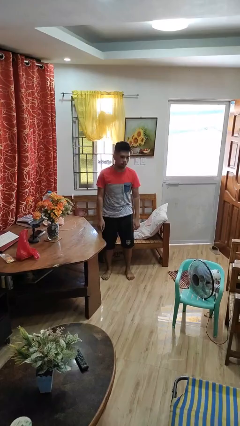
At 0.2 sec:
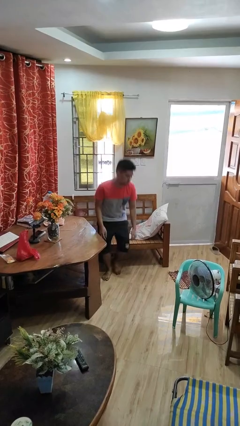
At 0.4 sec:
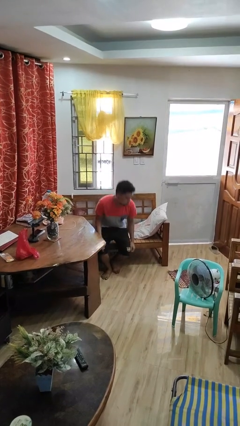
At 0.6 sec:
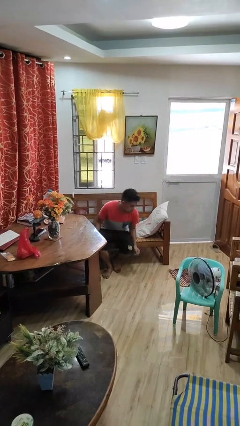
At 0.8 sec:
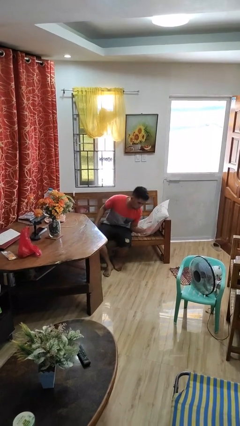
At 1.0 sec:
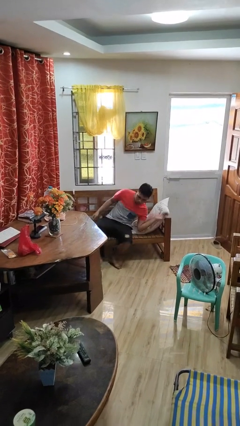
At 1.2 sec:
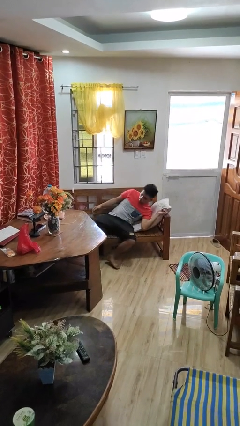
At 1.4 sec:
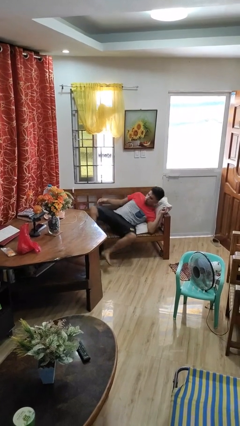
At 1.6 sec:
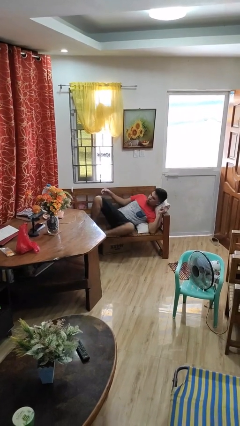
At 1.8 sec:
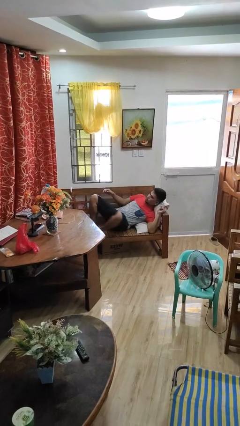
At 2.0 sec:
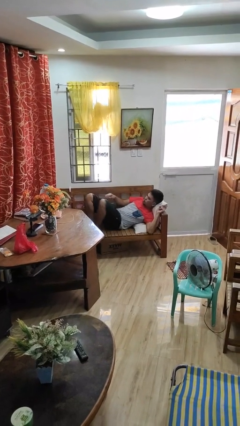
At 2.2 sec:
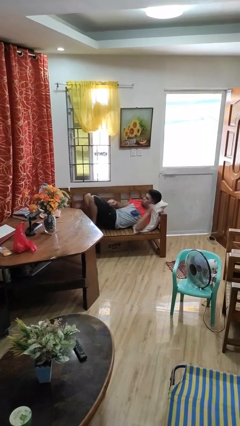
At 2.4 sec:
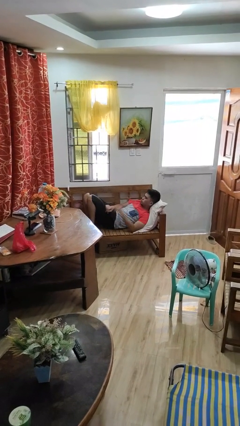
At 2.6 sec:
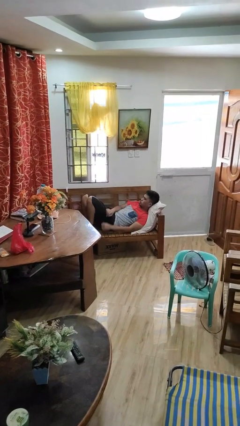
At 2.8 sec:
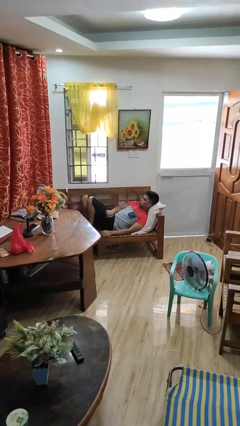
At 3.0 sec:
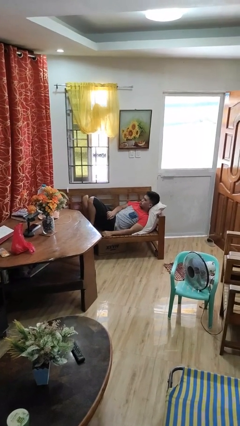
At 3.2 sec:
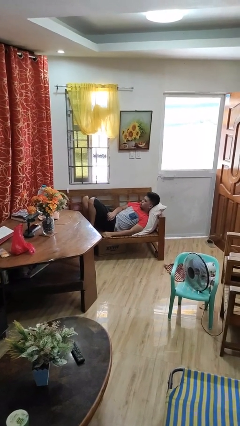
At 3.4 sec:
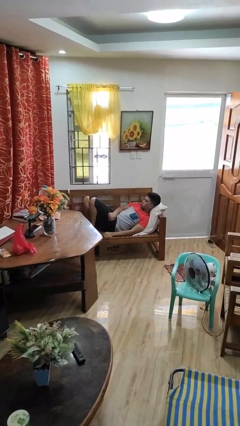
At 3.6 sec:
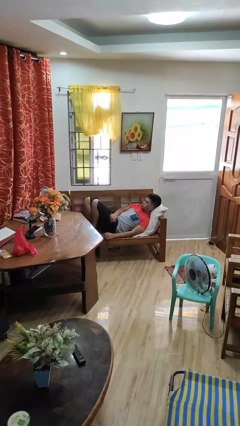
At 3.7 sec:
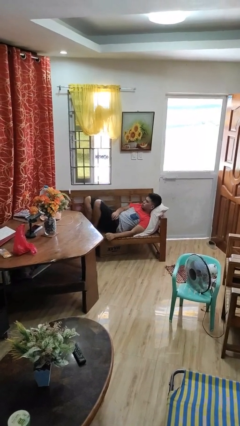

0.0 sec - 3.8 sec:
person lies down on couch

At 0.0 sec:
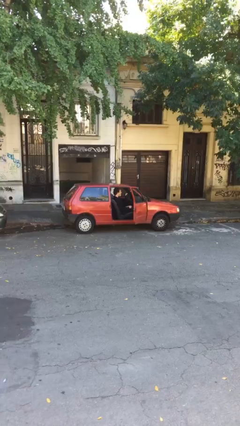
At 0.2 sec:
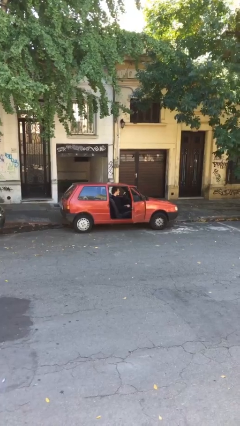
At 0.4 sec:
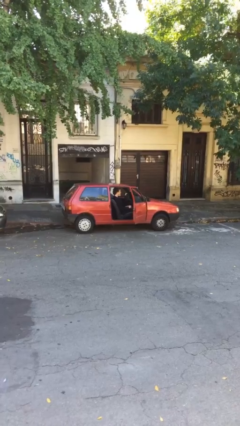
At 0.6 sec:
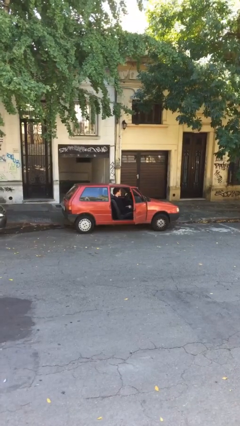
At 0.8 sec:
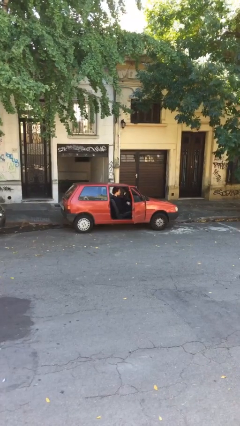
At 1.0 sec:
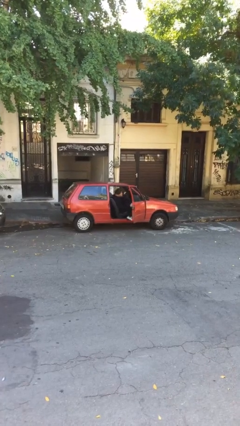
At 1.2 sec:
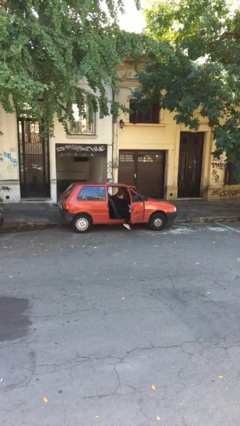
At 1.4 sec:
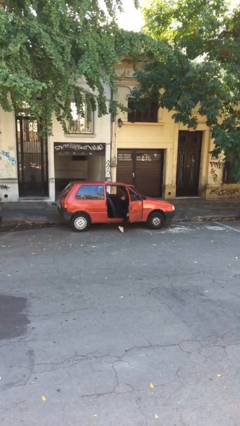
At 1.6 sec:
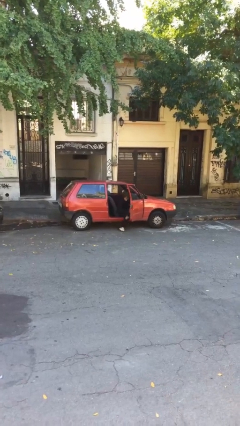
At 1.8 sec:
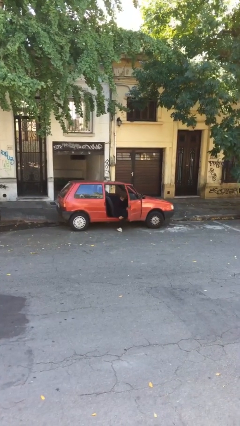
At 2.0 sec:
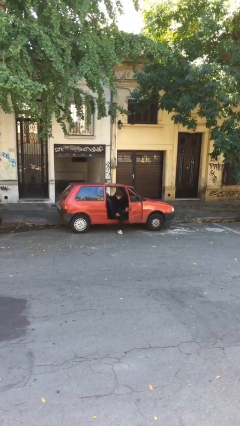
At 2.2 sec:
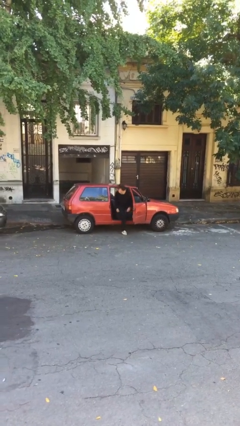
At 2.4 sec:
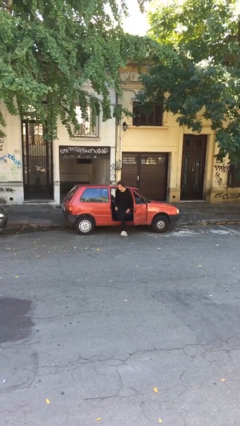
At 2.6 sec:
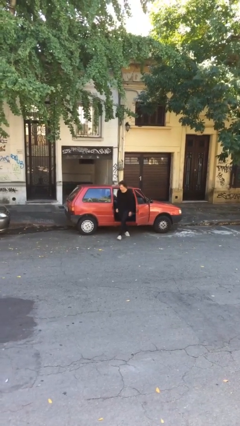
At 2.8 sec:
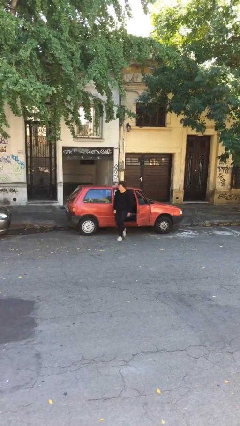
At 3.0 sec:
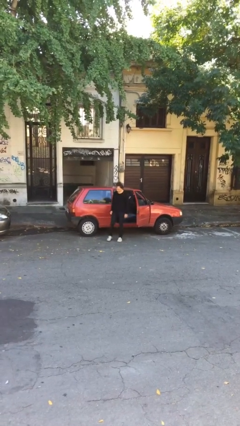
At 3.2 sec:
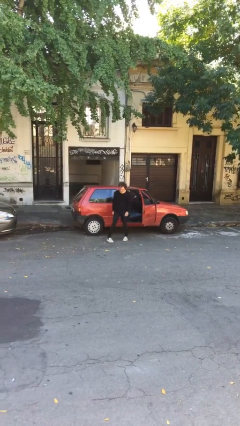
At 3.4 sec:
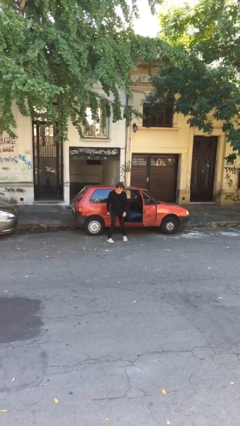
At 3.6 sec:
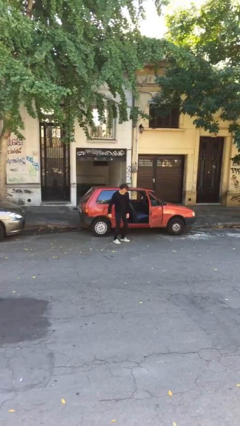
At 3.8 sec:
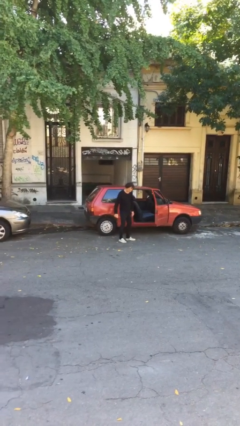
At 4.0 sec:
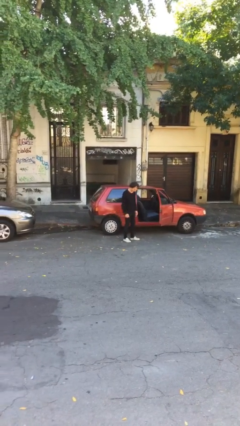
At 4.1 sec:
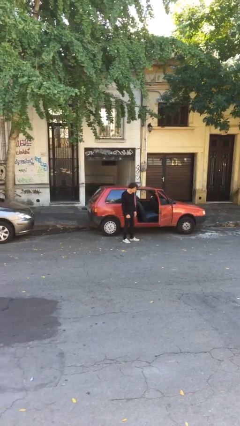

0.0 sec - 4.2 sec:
person exits car

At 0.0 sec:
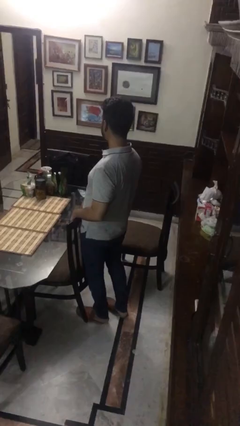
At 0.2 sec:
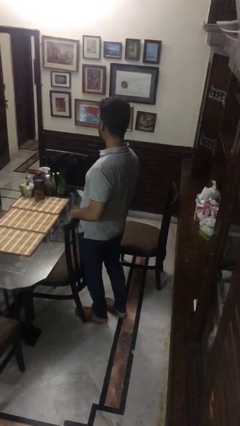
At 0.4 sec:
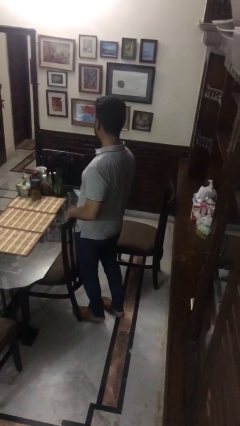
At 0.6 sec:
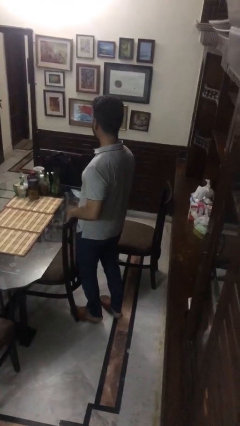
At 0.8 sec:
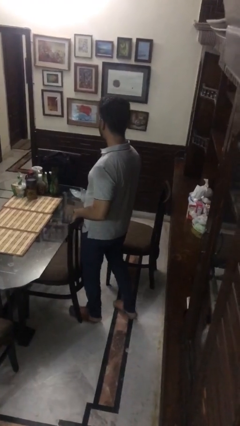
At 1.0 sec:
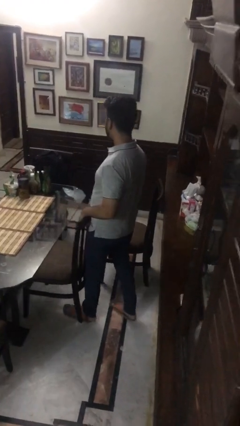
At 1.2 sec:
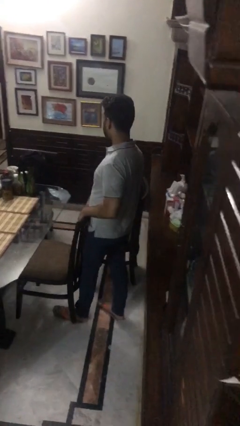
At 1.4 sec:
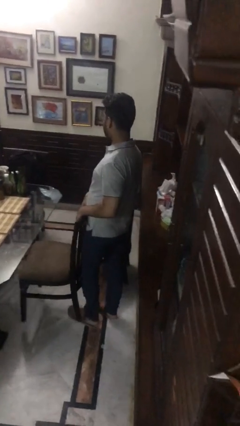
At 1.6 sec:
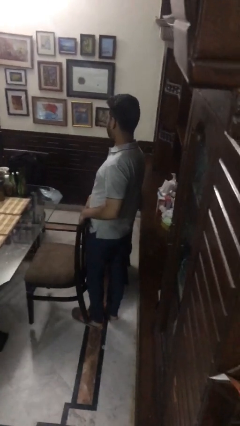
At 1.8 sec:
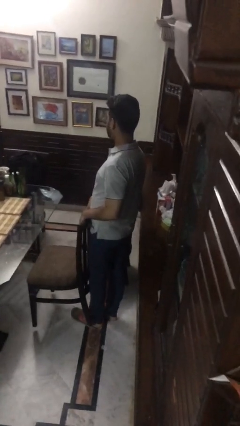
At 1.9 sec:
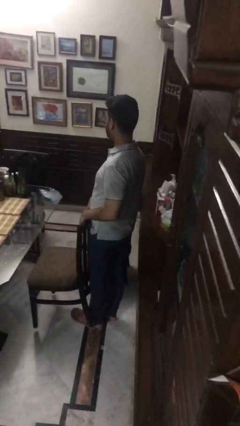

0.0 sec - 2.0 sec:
person pulls out chair

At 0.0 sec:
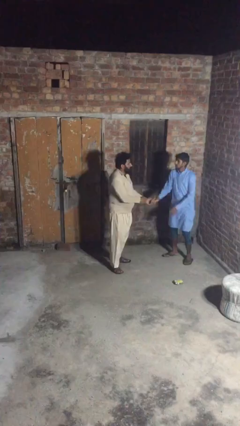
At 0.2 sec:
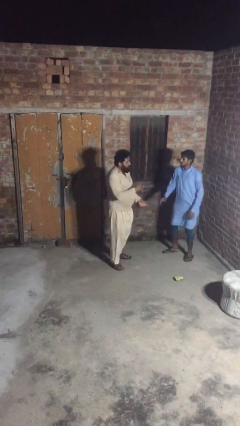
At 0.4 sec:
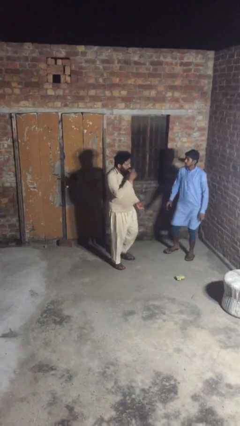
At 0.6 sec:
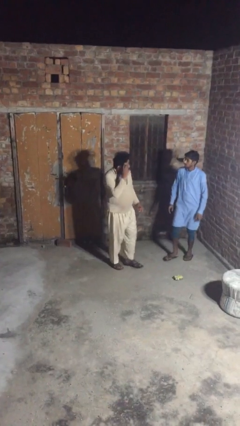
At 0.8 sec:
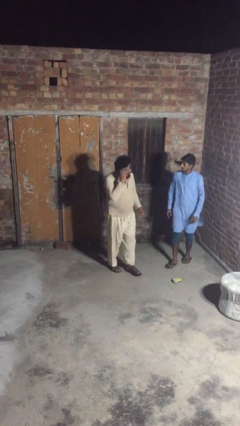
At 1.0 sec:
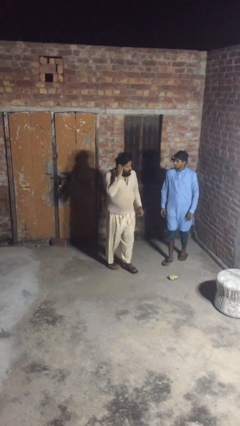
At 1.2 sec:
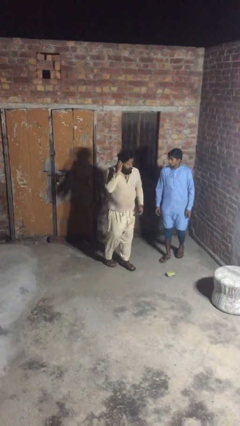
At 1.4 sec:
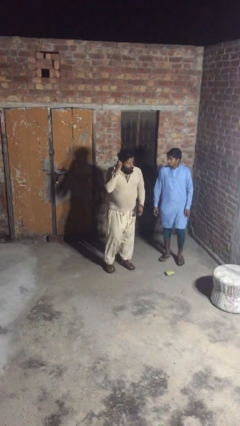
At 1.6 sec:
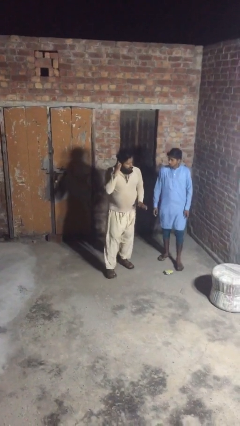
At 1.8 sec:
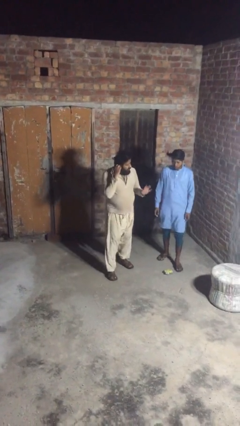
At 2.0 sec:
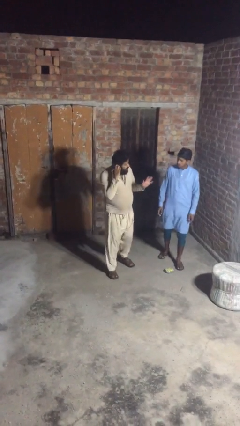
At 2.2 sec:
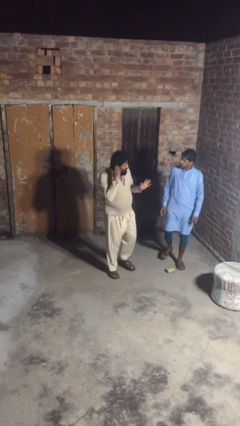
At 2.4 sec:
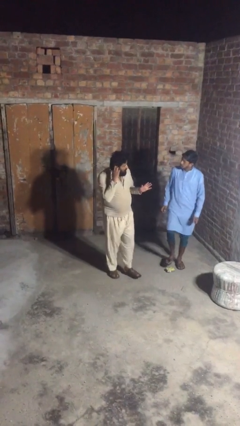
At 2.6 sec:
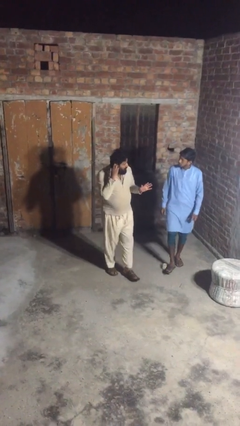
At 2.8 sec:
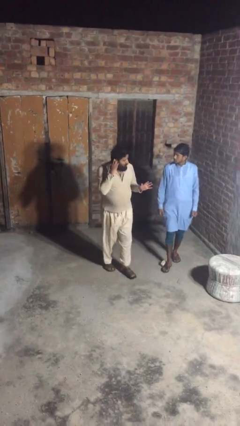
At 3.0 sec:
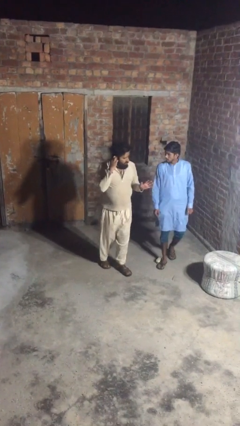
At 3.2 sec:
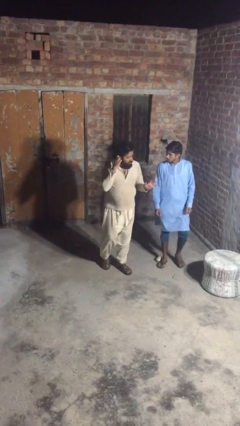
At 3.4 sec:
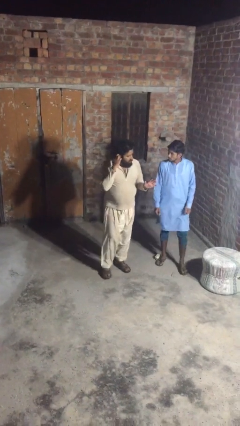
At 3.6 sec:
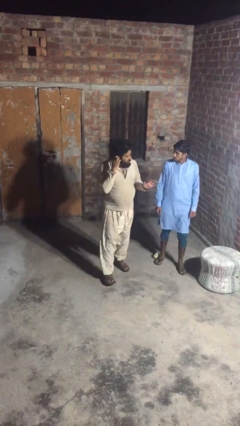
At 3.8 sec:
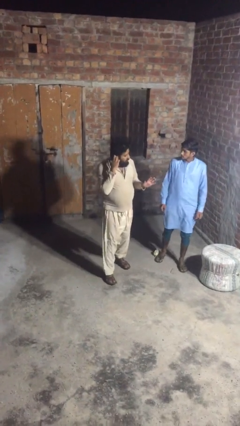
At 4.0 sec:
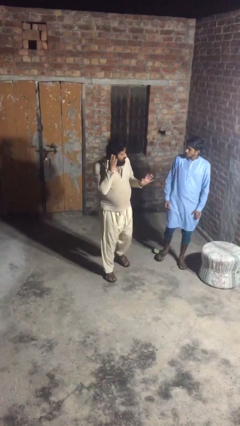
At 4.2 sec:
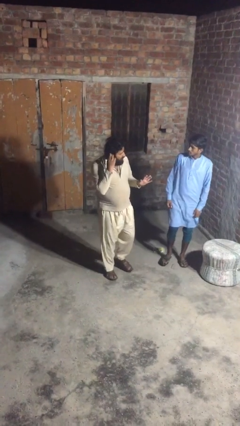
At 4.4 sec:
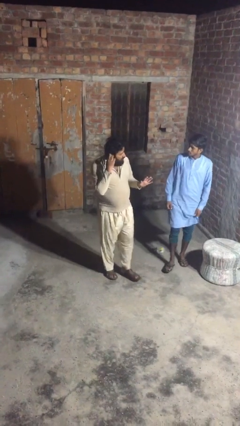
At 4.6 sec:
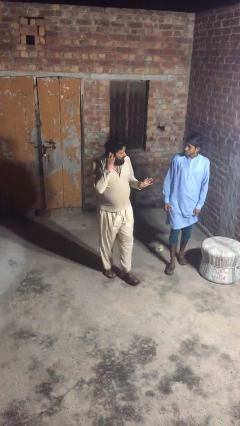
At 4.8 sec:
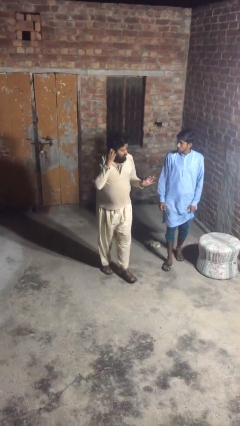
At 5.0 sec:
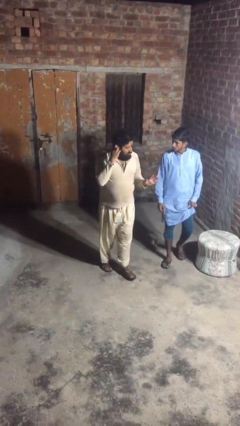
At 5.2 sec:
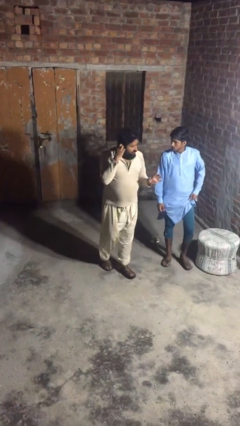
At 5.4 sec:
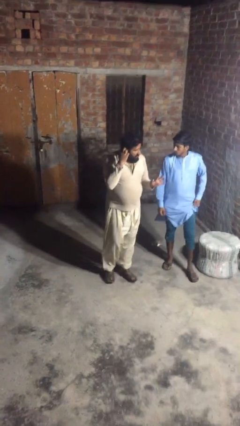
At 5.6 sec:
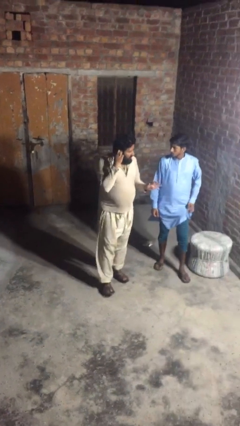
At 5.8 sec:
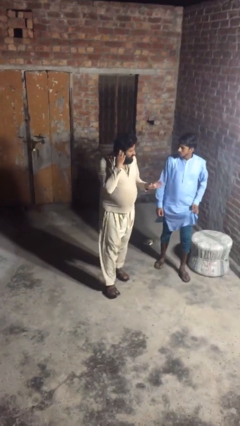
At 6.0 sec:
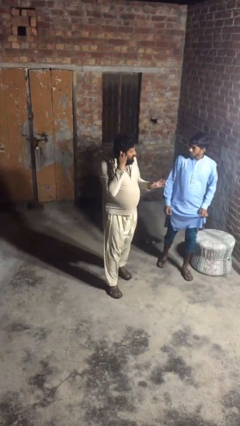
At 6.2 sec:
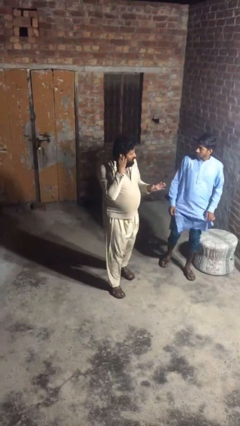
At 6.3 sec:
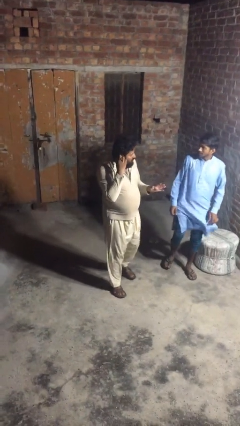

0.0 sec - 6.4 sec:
person talks to person

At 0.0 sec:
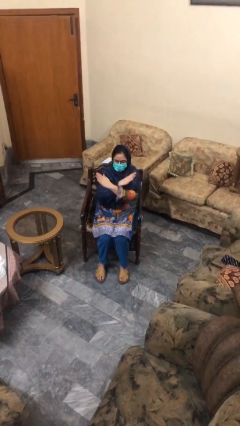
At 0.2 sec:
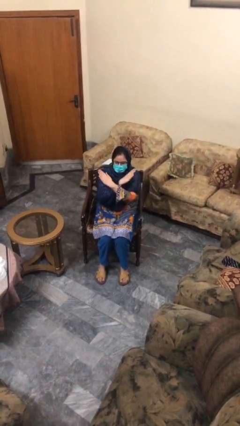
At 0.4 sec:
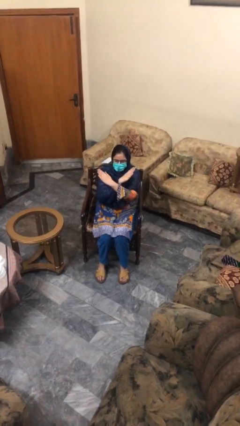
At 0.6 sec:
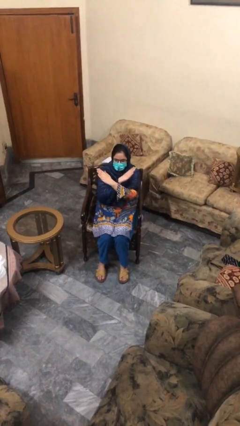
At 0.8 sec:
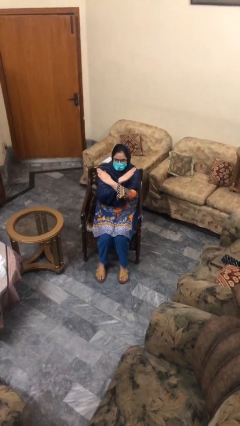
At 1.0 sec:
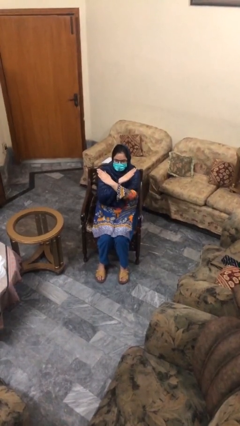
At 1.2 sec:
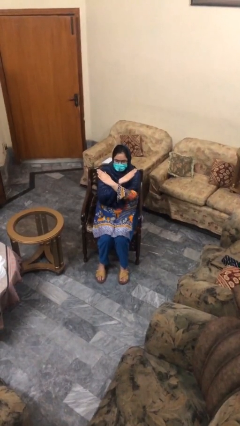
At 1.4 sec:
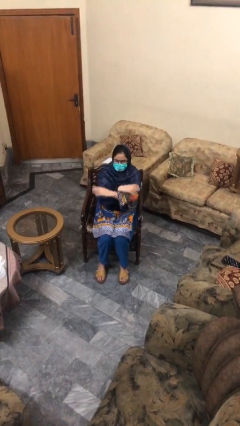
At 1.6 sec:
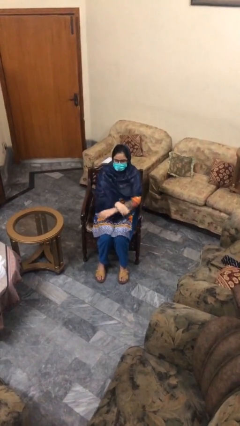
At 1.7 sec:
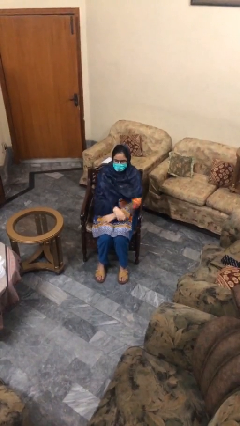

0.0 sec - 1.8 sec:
person gestures arms x
